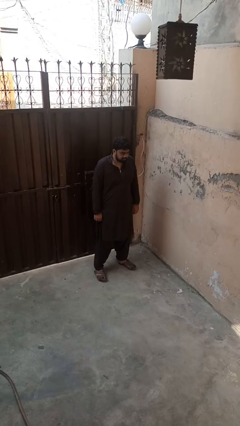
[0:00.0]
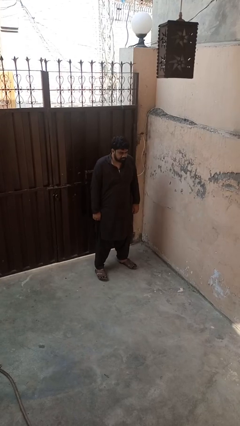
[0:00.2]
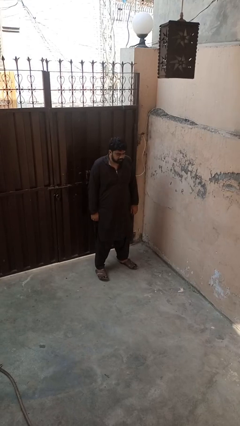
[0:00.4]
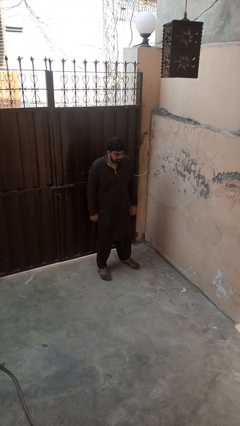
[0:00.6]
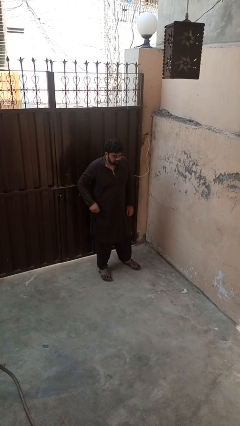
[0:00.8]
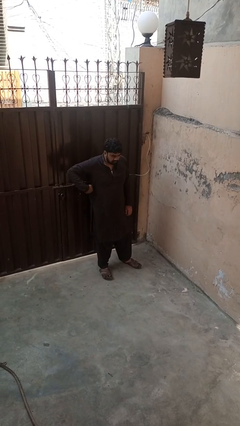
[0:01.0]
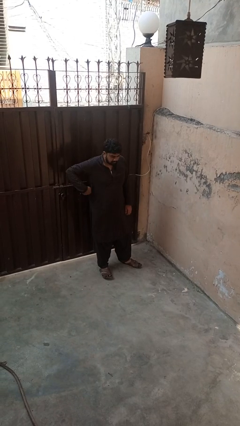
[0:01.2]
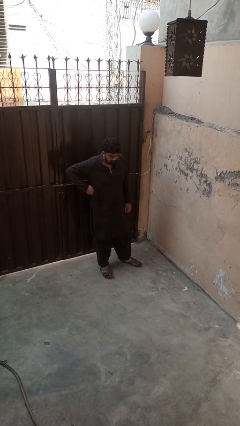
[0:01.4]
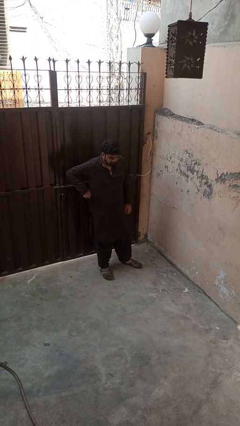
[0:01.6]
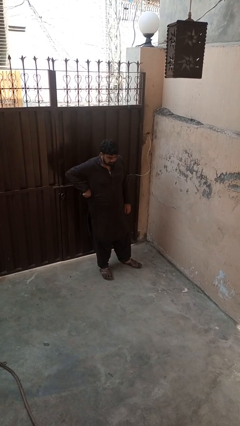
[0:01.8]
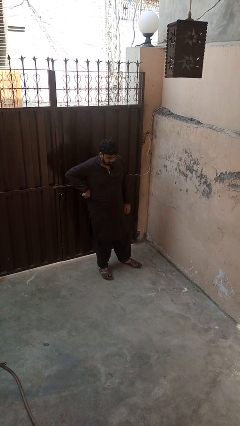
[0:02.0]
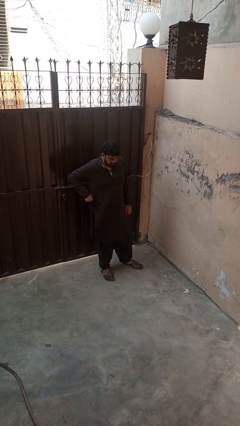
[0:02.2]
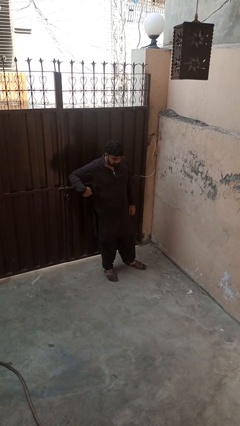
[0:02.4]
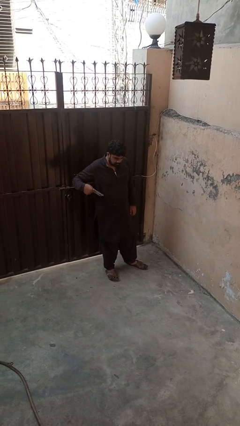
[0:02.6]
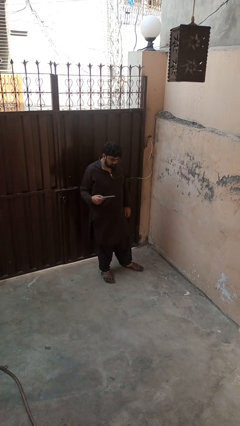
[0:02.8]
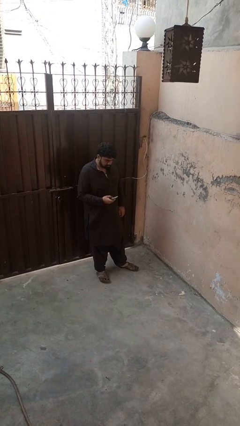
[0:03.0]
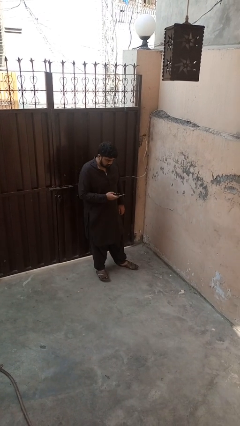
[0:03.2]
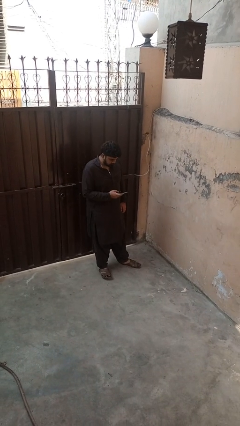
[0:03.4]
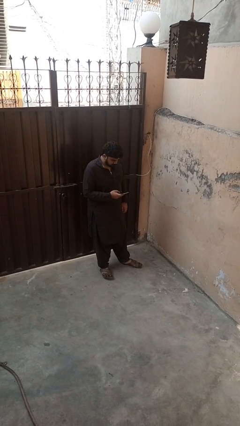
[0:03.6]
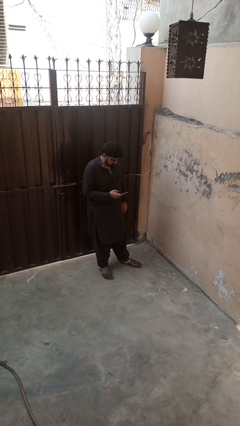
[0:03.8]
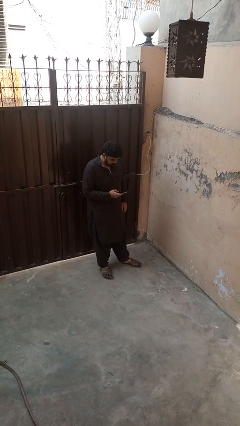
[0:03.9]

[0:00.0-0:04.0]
person takes phone from pocket

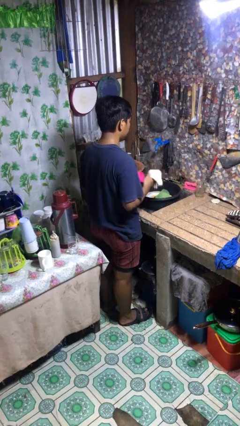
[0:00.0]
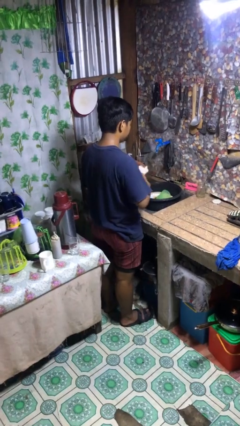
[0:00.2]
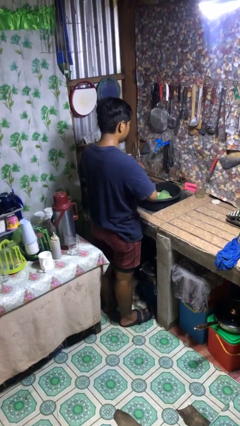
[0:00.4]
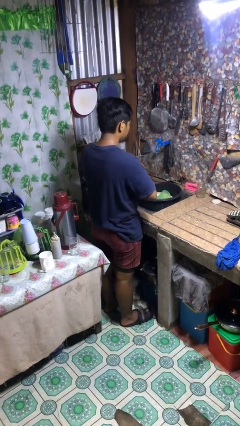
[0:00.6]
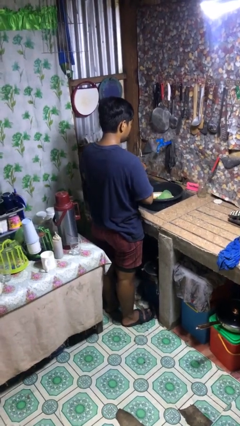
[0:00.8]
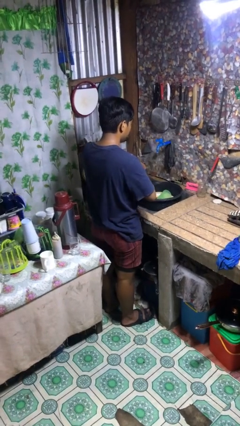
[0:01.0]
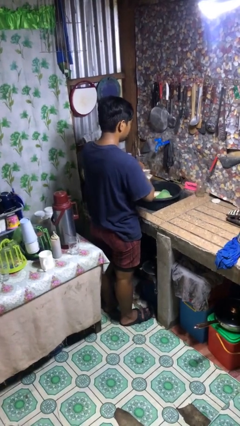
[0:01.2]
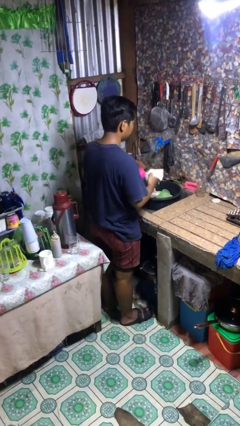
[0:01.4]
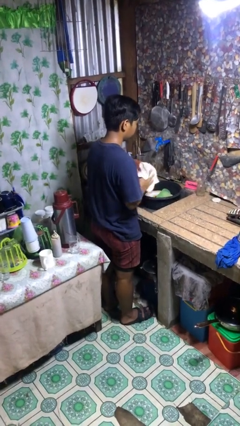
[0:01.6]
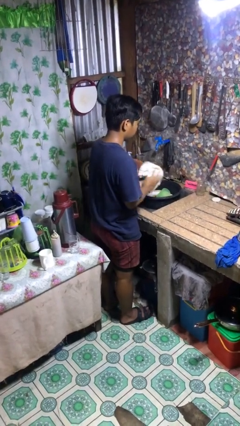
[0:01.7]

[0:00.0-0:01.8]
person dries dish

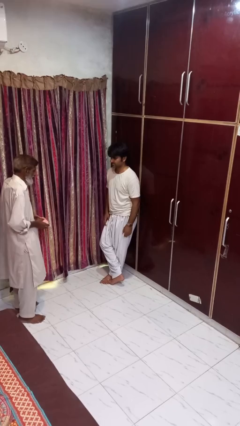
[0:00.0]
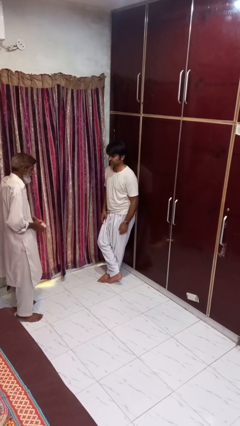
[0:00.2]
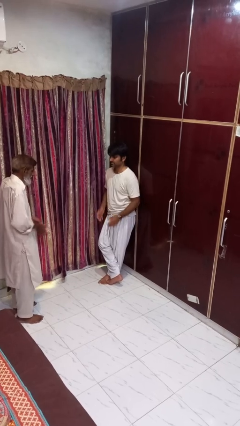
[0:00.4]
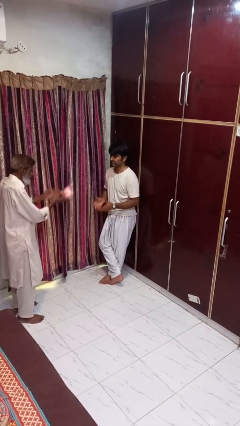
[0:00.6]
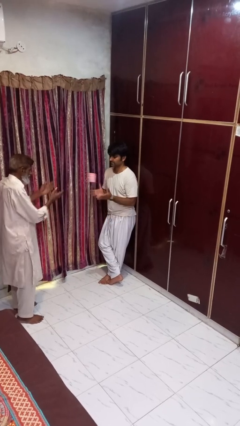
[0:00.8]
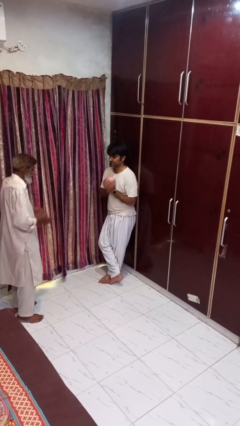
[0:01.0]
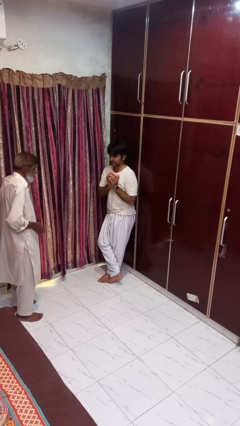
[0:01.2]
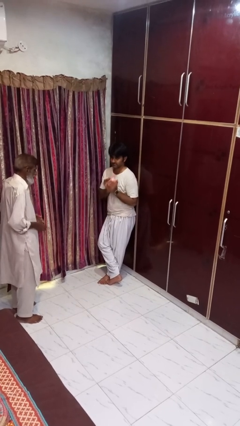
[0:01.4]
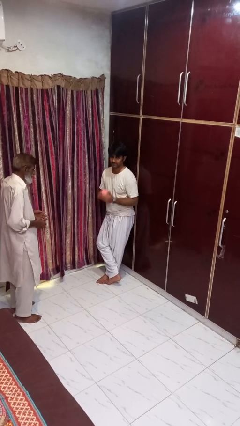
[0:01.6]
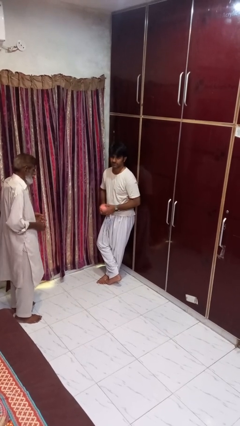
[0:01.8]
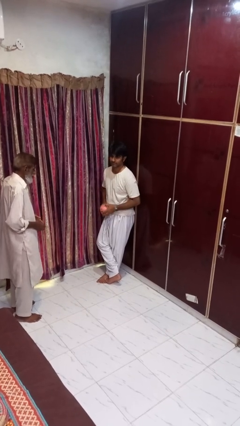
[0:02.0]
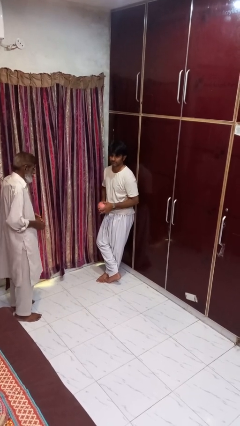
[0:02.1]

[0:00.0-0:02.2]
person catches object from person

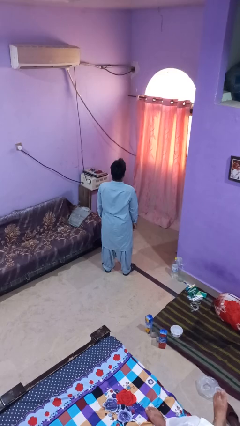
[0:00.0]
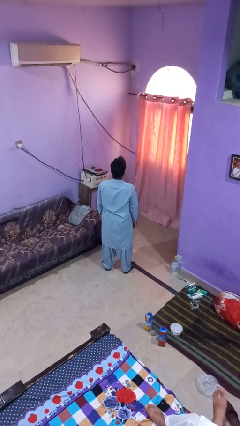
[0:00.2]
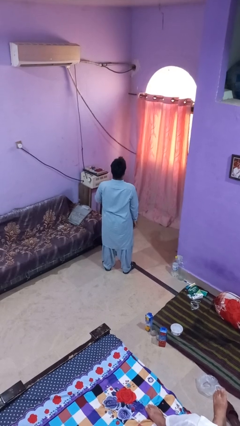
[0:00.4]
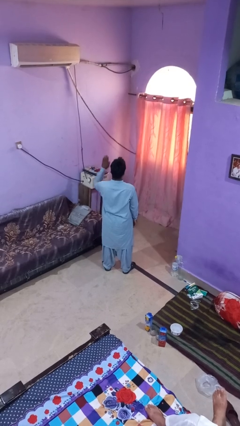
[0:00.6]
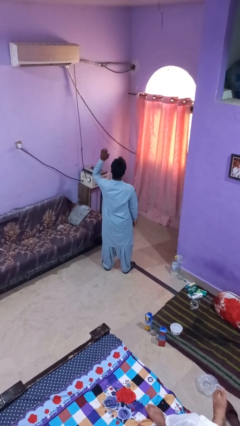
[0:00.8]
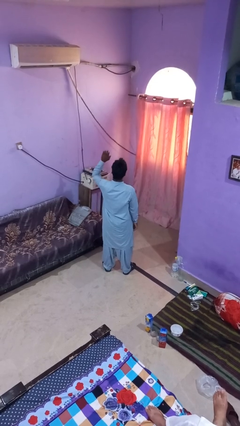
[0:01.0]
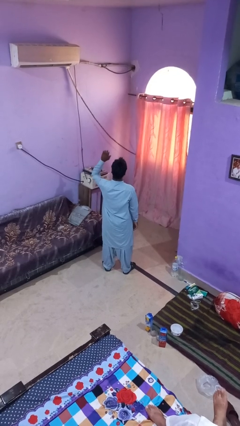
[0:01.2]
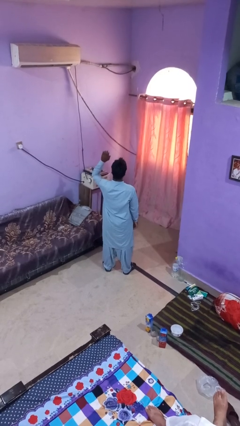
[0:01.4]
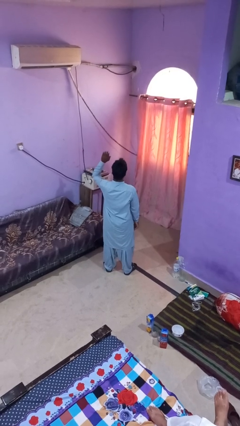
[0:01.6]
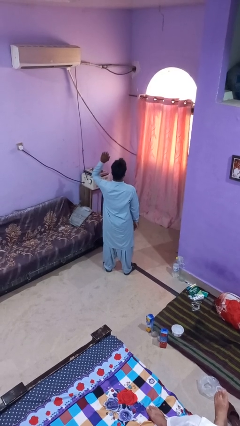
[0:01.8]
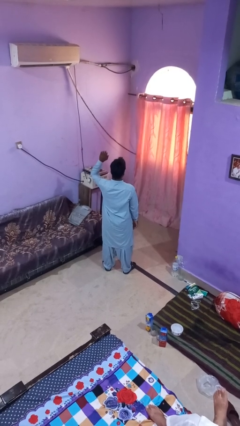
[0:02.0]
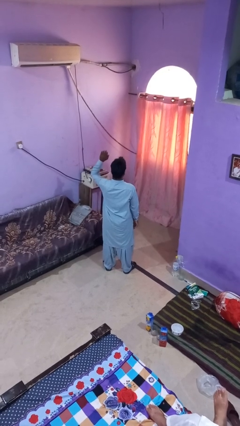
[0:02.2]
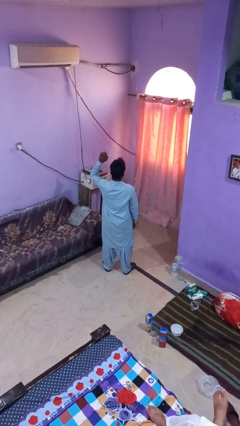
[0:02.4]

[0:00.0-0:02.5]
person gestures raise hand

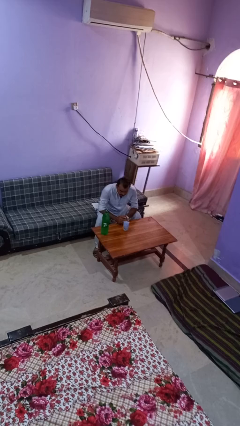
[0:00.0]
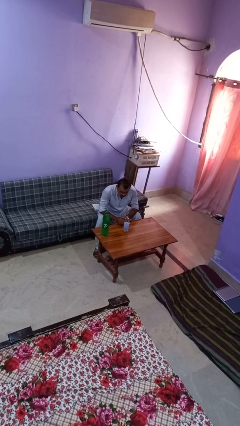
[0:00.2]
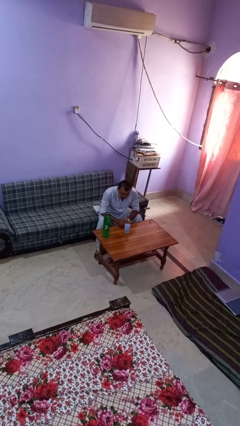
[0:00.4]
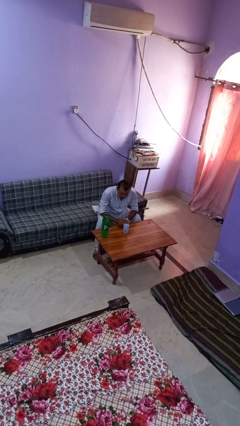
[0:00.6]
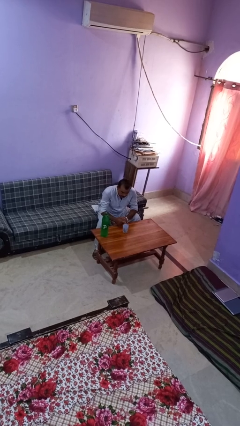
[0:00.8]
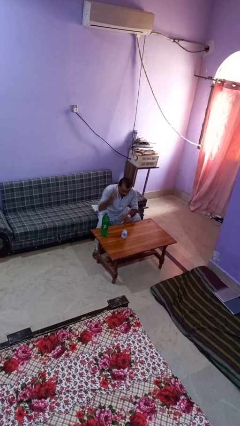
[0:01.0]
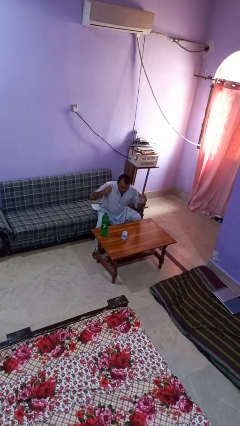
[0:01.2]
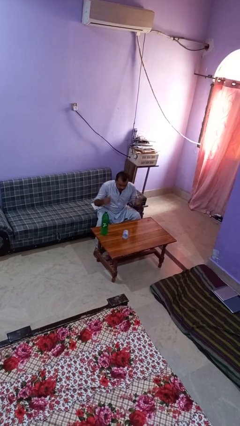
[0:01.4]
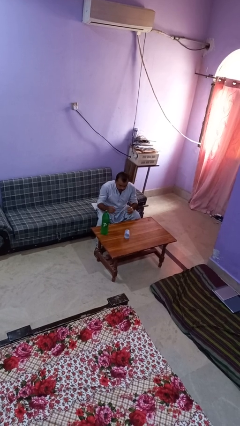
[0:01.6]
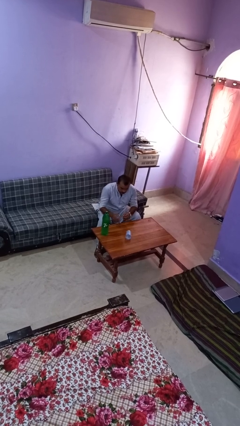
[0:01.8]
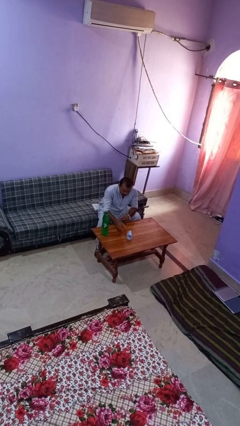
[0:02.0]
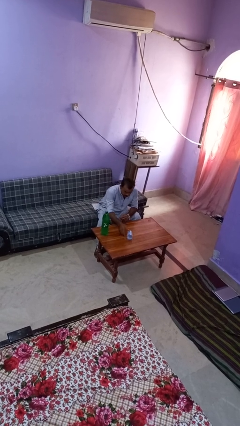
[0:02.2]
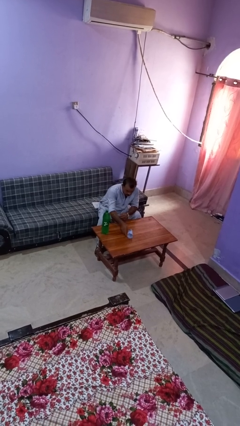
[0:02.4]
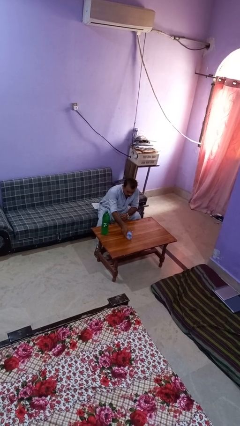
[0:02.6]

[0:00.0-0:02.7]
person knocks over glass

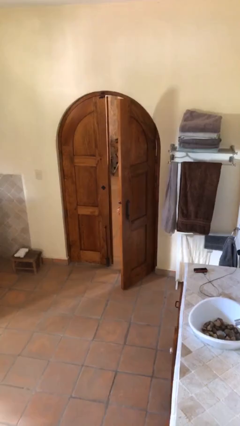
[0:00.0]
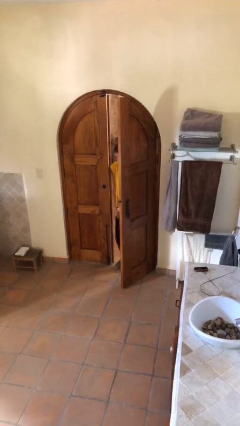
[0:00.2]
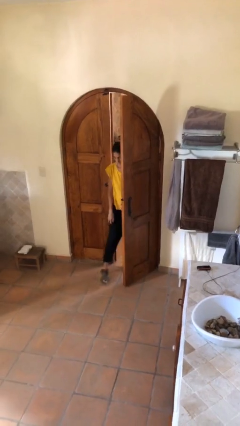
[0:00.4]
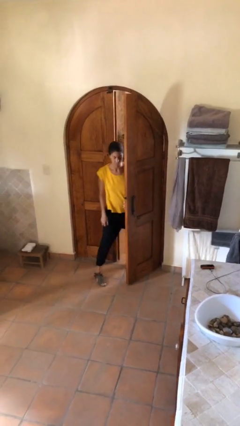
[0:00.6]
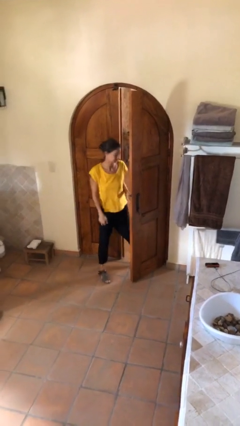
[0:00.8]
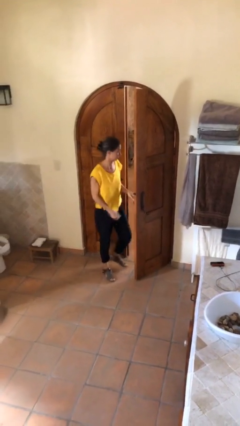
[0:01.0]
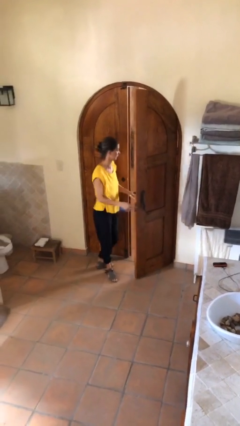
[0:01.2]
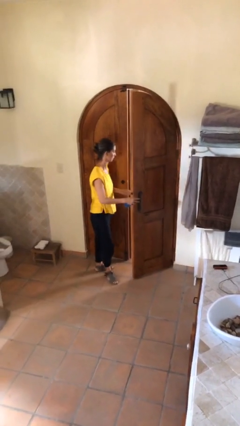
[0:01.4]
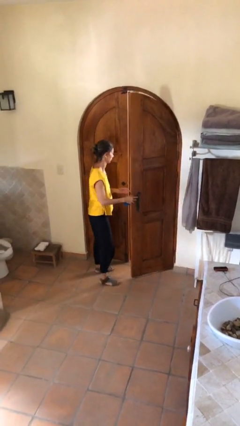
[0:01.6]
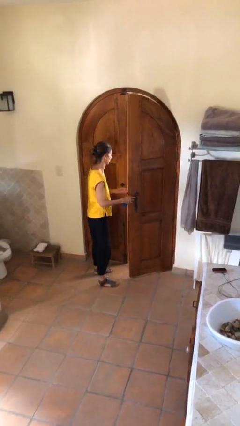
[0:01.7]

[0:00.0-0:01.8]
person enters scene through structure

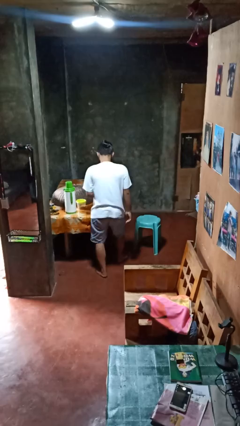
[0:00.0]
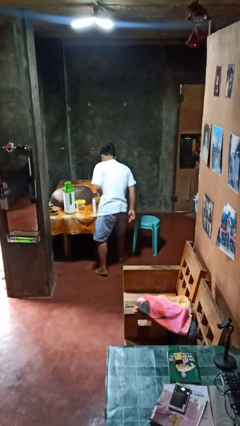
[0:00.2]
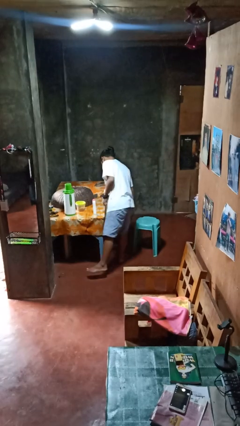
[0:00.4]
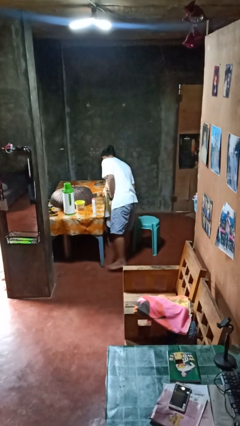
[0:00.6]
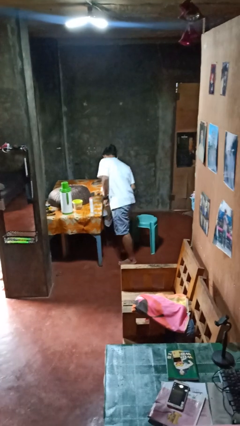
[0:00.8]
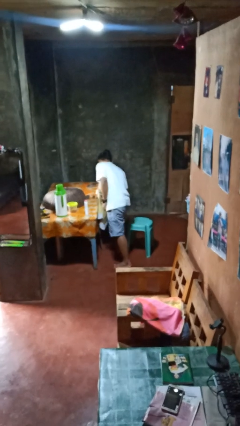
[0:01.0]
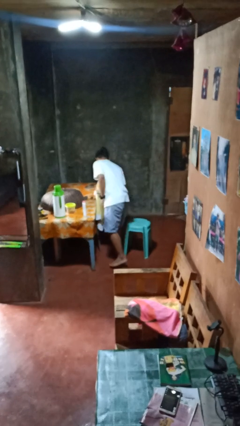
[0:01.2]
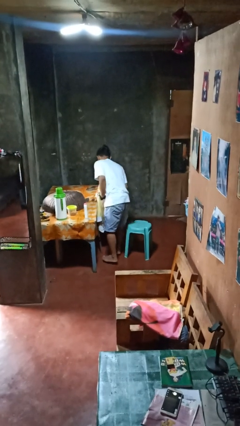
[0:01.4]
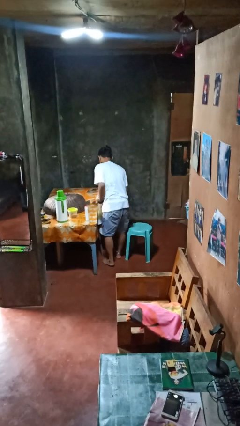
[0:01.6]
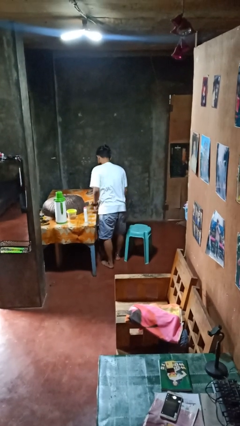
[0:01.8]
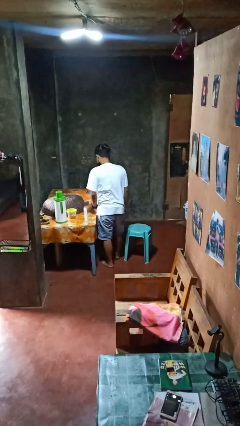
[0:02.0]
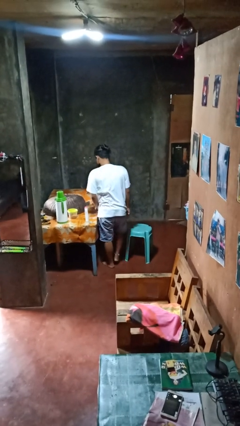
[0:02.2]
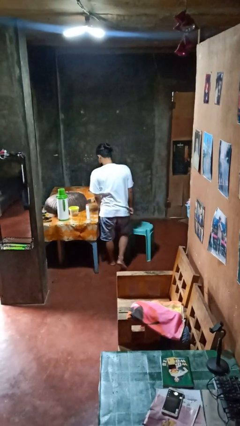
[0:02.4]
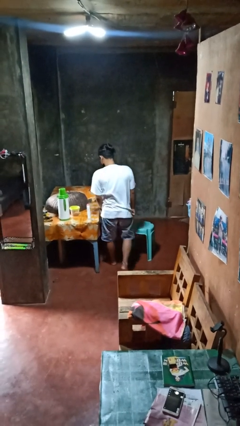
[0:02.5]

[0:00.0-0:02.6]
person bumps into table
